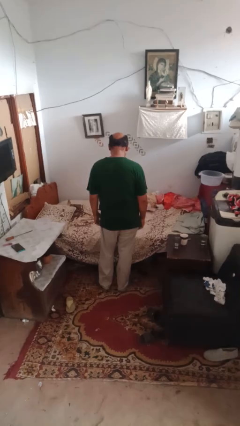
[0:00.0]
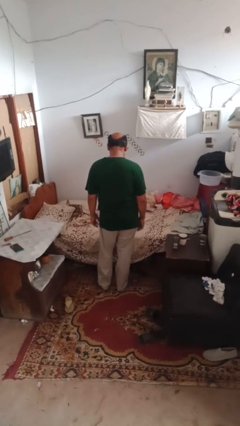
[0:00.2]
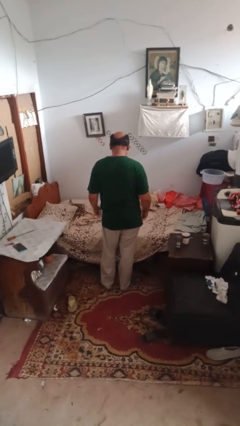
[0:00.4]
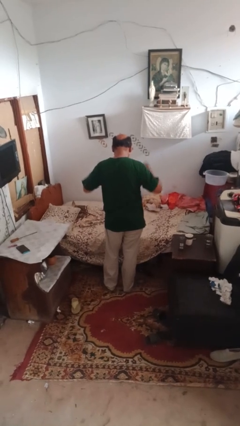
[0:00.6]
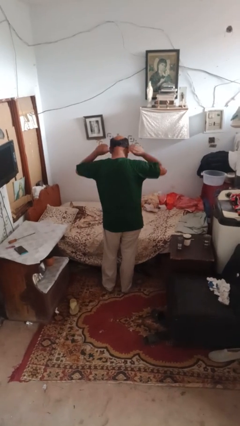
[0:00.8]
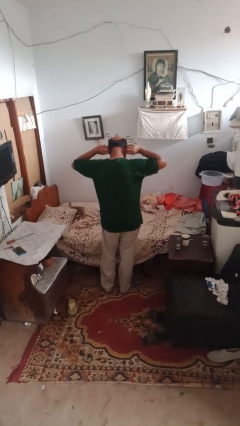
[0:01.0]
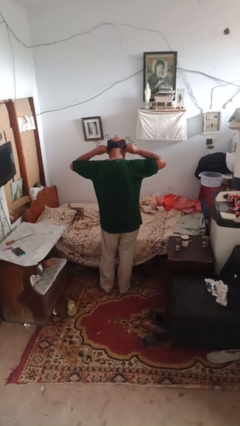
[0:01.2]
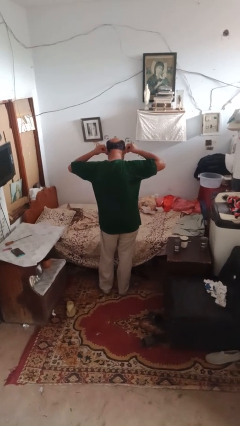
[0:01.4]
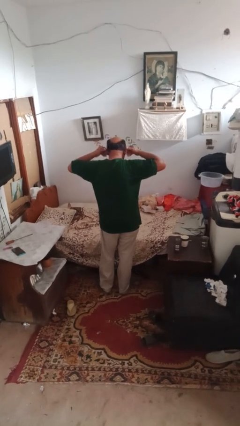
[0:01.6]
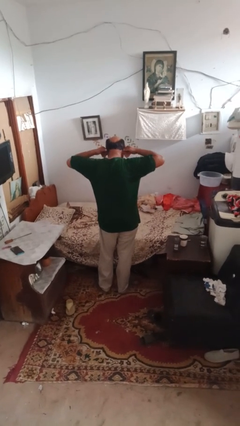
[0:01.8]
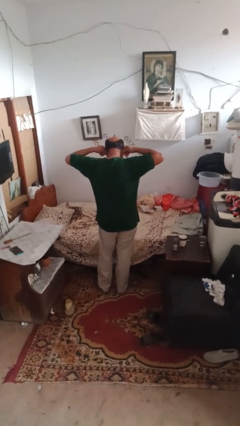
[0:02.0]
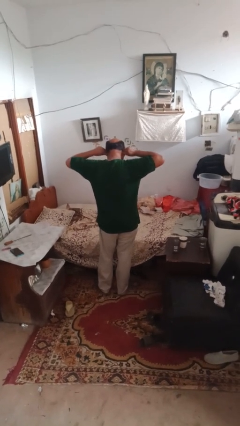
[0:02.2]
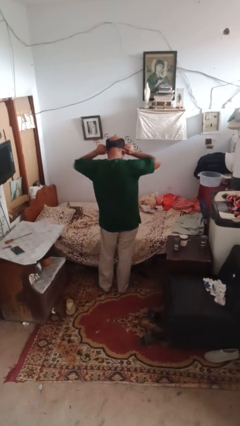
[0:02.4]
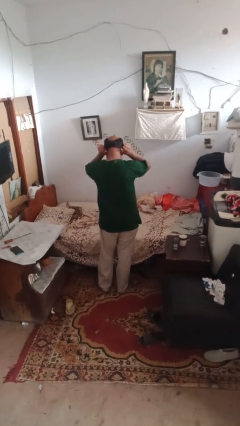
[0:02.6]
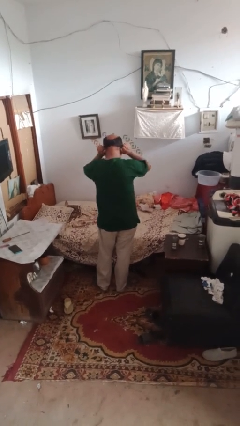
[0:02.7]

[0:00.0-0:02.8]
person touches earlobe

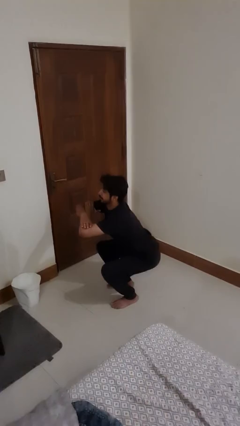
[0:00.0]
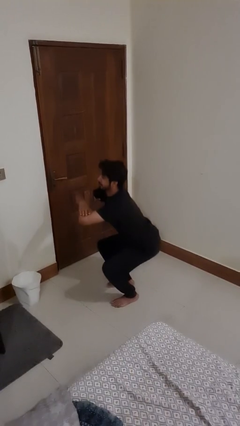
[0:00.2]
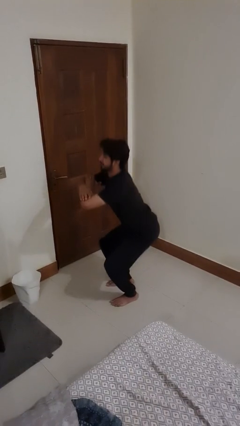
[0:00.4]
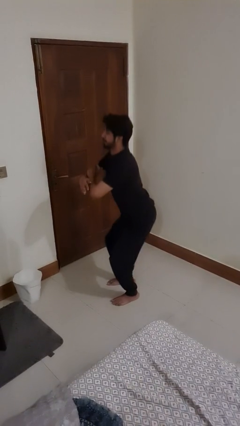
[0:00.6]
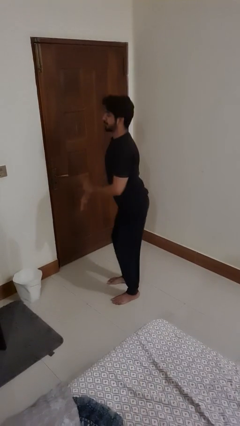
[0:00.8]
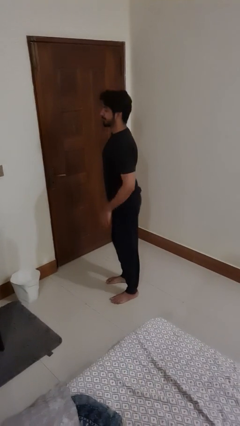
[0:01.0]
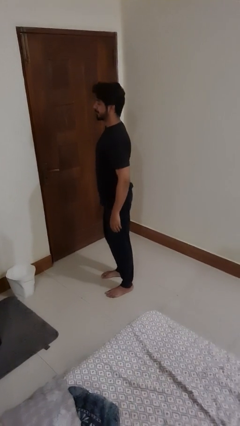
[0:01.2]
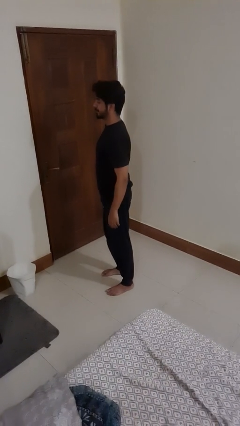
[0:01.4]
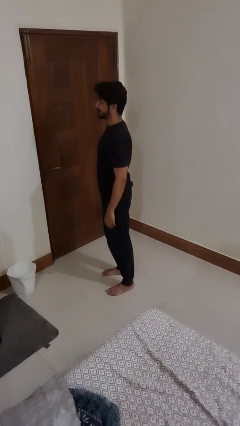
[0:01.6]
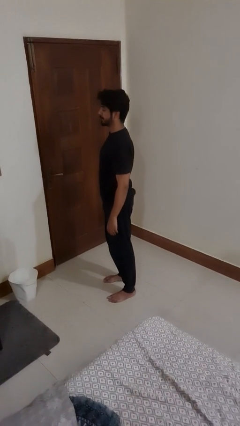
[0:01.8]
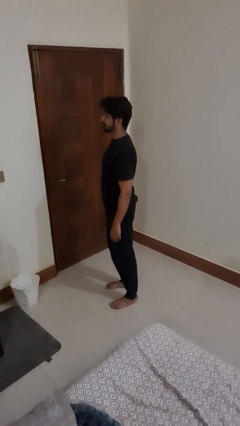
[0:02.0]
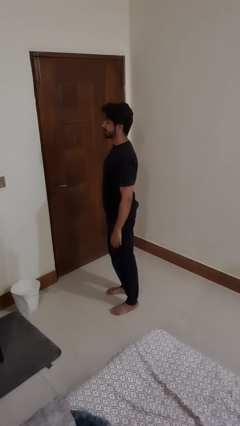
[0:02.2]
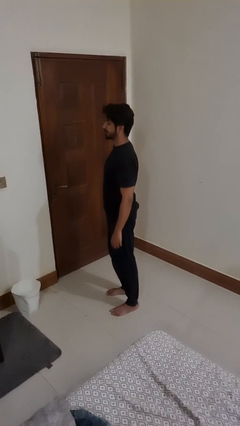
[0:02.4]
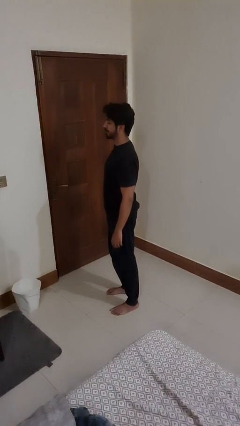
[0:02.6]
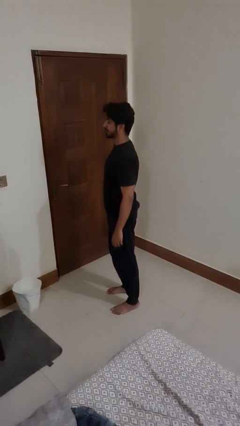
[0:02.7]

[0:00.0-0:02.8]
person stands up

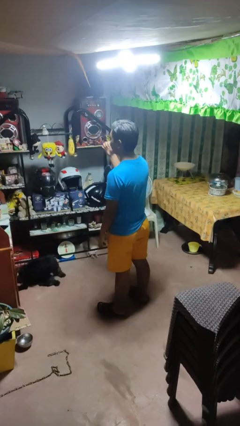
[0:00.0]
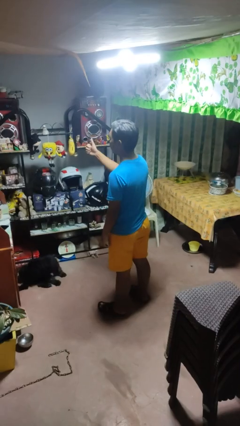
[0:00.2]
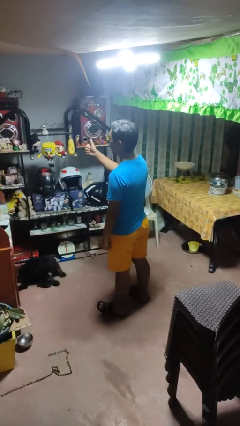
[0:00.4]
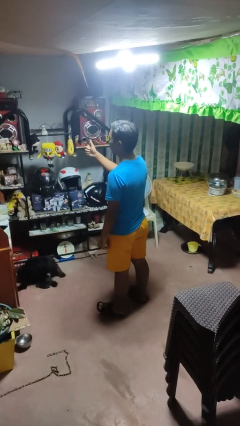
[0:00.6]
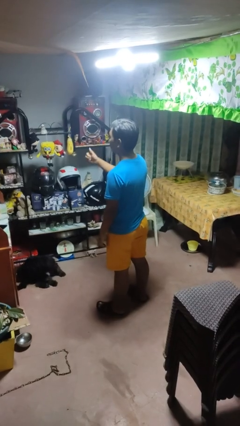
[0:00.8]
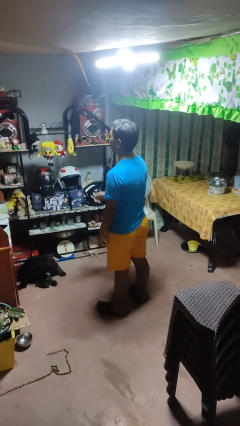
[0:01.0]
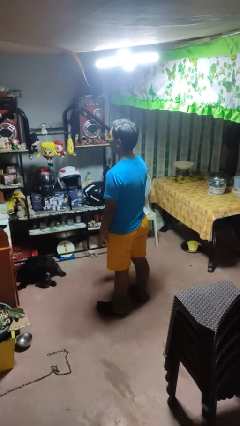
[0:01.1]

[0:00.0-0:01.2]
person gestures thumbs up

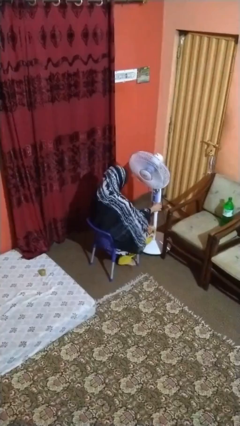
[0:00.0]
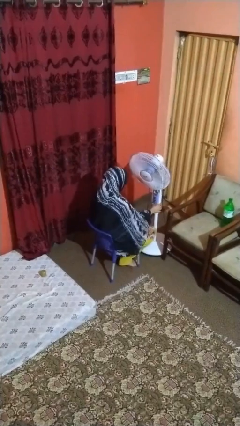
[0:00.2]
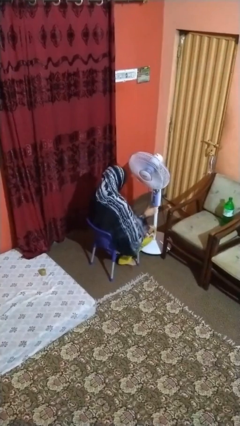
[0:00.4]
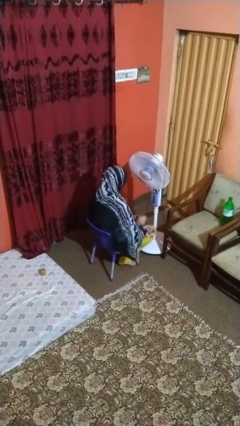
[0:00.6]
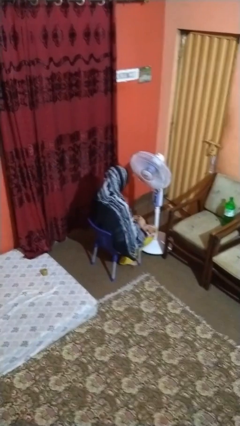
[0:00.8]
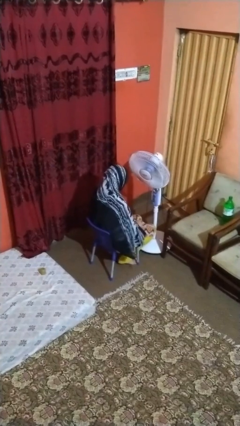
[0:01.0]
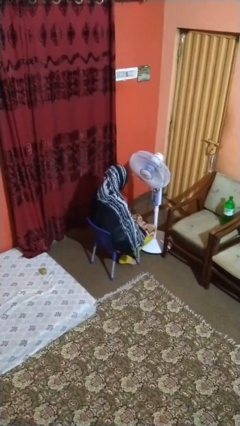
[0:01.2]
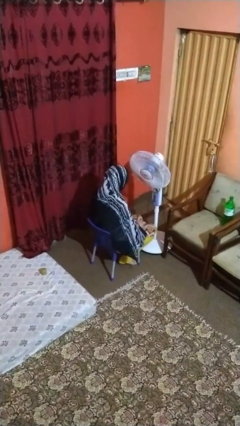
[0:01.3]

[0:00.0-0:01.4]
person turns off fan

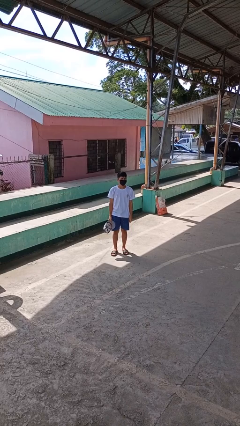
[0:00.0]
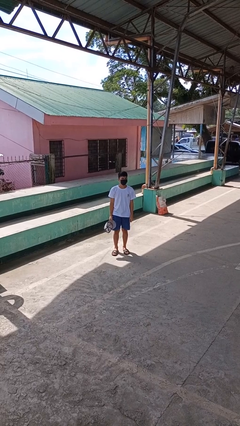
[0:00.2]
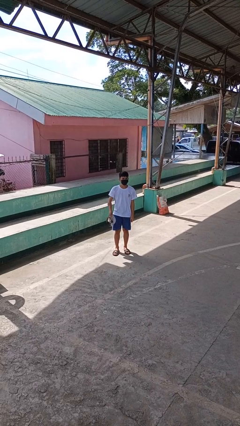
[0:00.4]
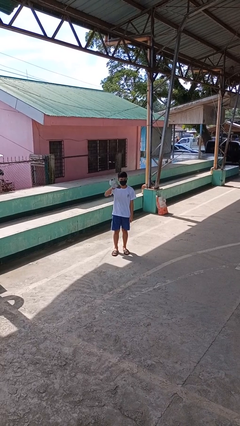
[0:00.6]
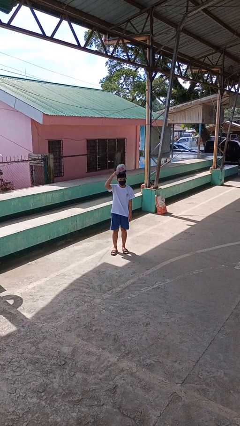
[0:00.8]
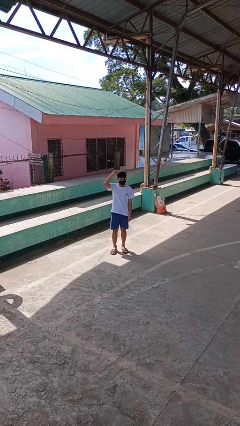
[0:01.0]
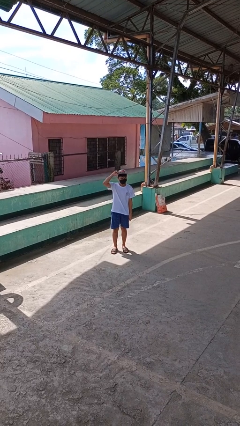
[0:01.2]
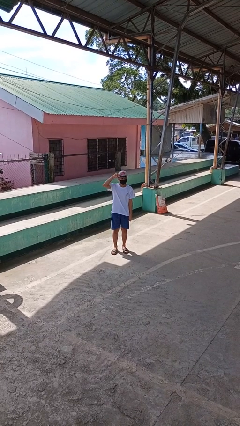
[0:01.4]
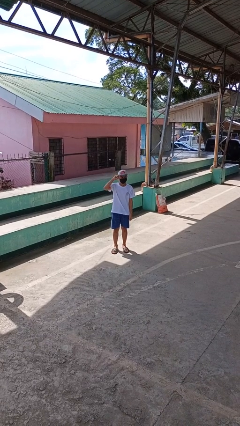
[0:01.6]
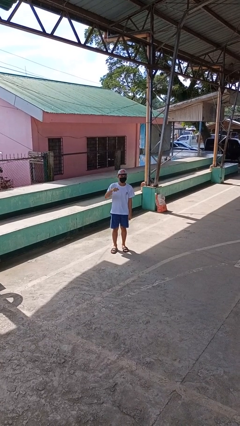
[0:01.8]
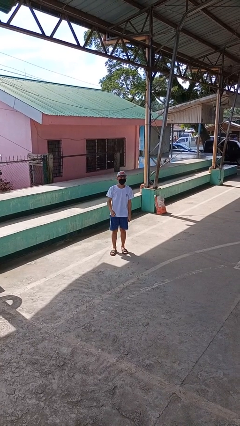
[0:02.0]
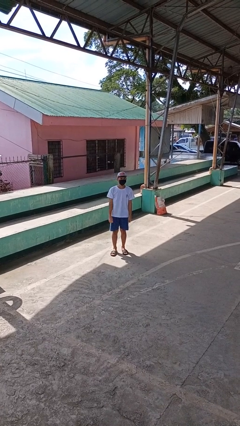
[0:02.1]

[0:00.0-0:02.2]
person puts on hat

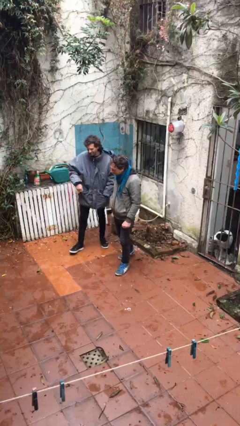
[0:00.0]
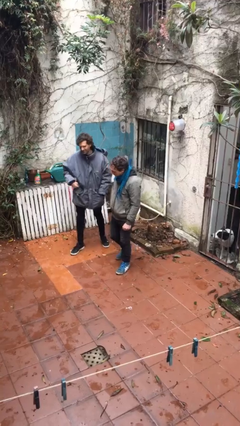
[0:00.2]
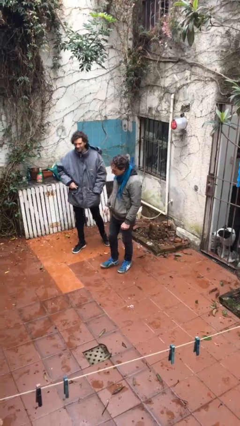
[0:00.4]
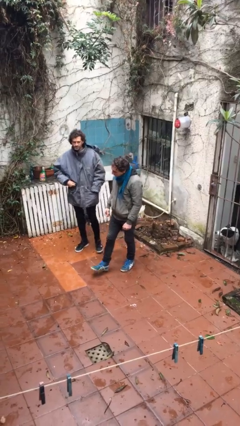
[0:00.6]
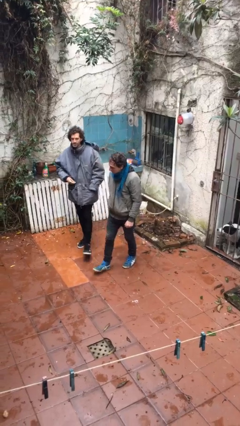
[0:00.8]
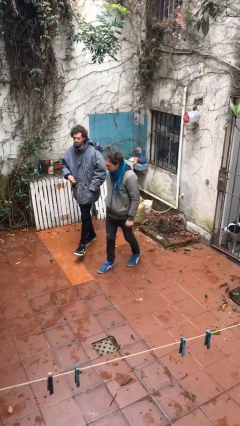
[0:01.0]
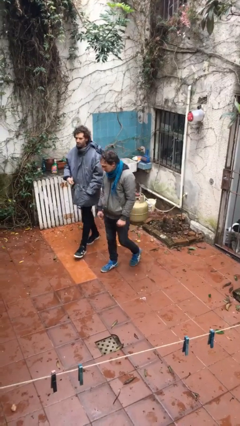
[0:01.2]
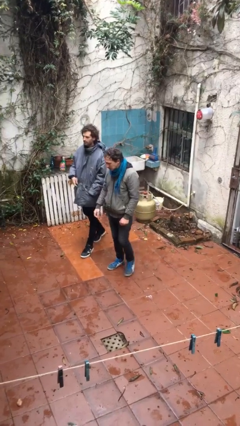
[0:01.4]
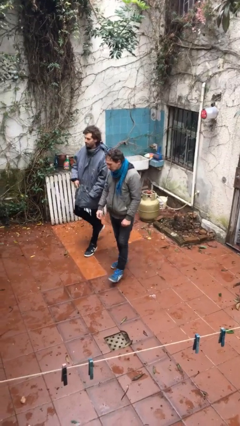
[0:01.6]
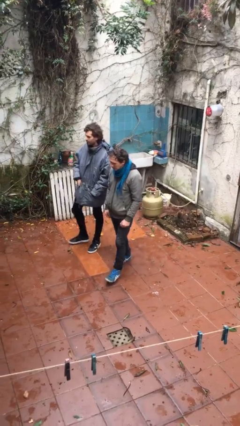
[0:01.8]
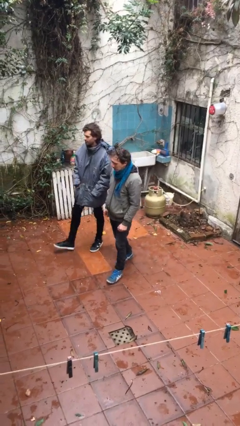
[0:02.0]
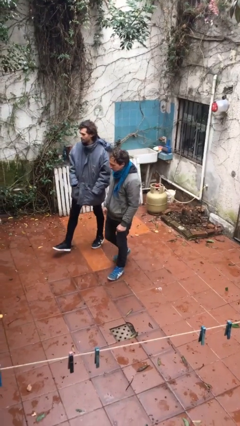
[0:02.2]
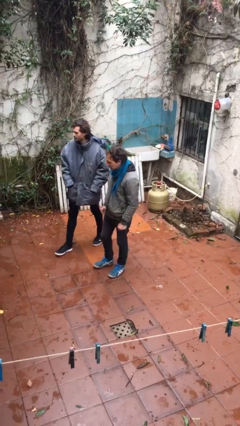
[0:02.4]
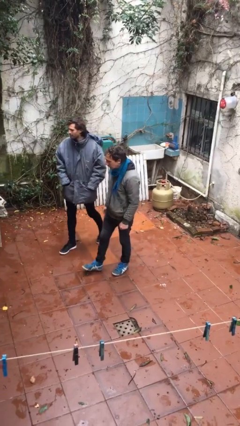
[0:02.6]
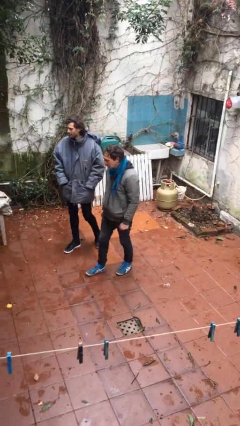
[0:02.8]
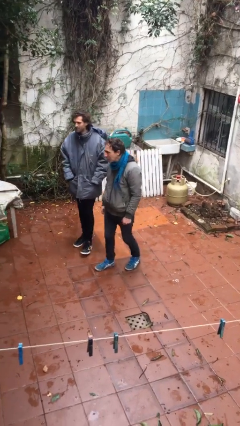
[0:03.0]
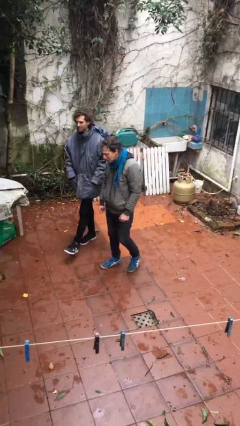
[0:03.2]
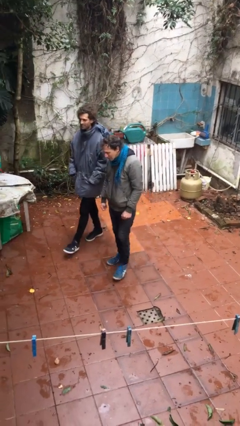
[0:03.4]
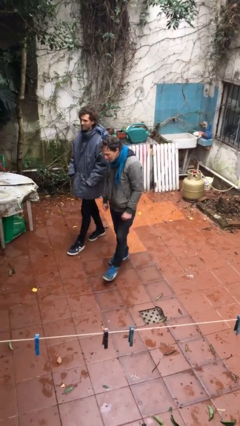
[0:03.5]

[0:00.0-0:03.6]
person talks to person

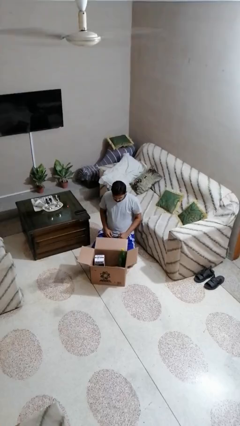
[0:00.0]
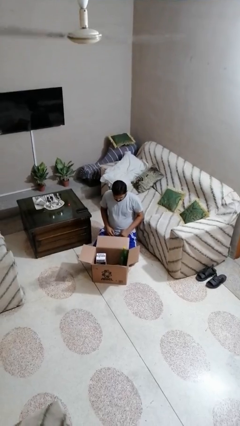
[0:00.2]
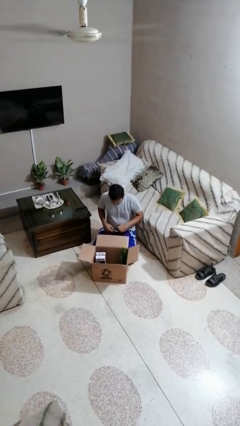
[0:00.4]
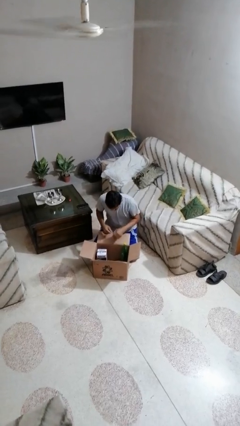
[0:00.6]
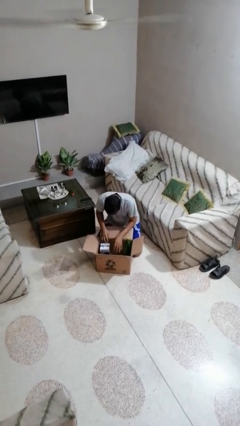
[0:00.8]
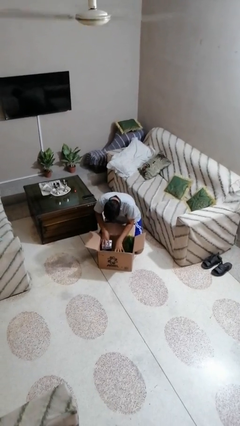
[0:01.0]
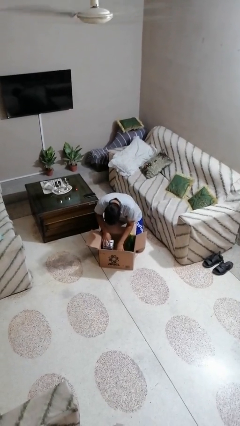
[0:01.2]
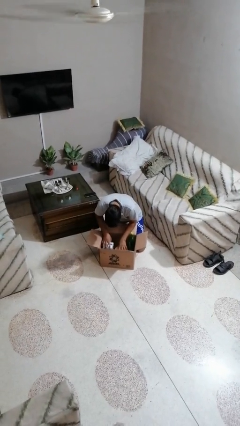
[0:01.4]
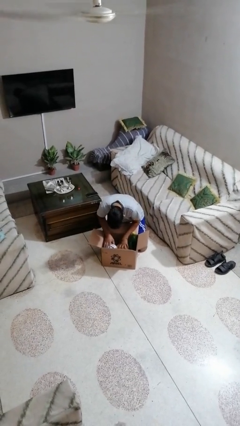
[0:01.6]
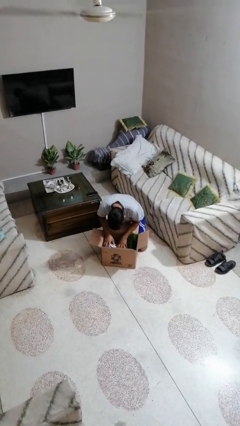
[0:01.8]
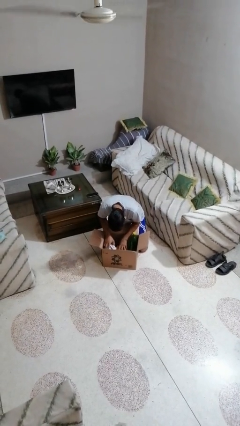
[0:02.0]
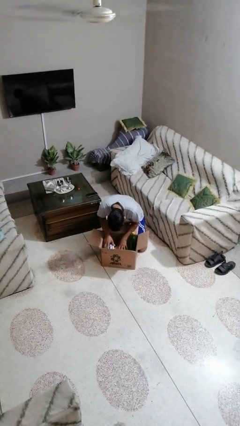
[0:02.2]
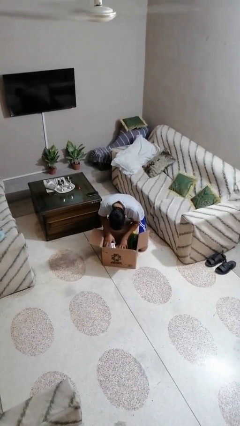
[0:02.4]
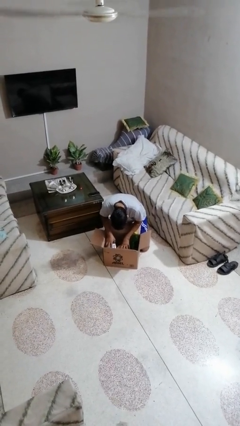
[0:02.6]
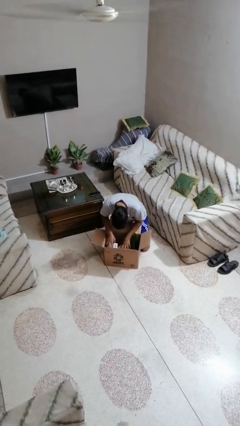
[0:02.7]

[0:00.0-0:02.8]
person searches in box

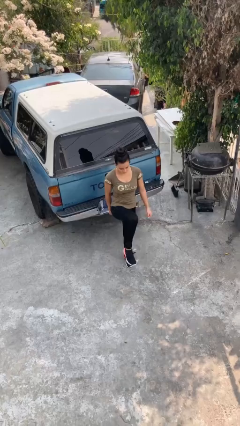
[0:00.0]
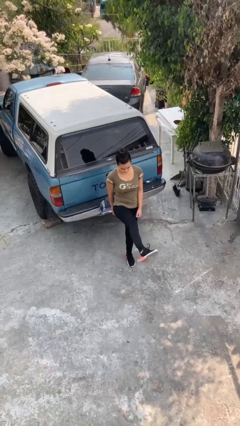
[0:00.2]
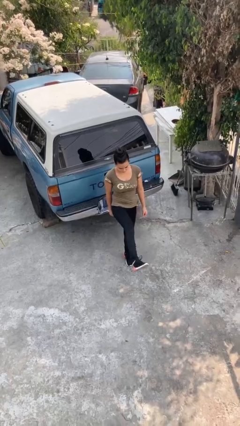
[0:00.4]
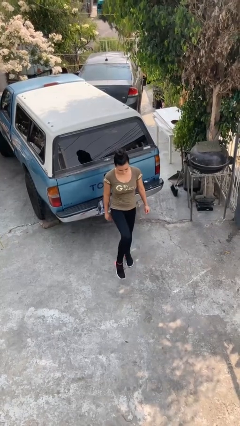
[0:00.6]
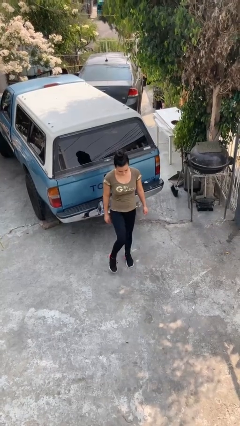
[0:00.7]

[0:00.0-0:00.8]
person karate kicks
